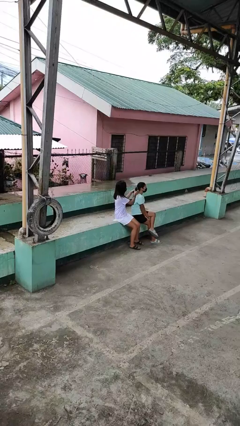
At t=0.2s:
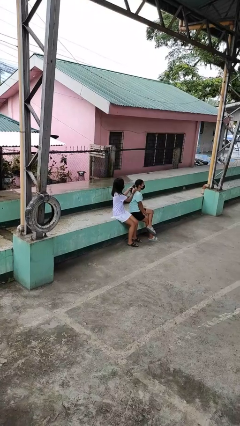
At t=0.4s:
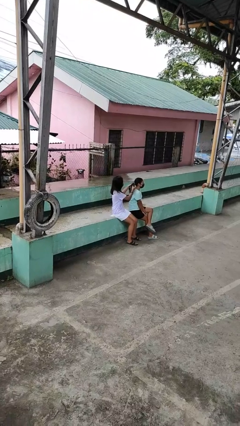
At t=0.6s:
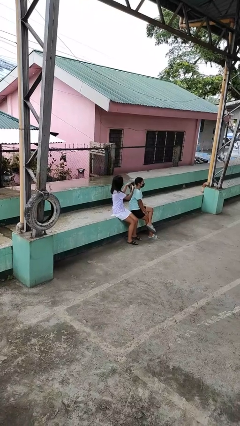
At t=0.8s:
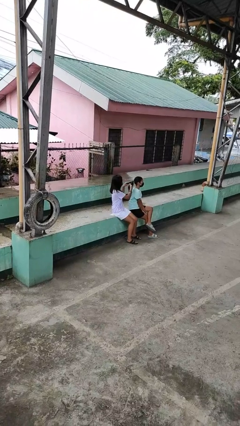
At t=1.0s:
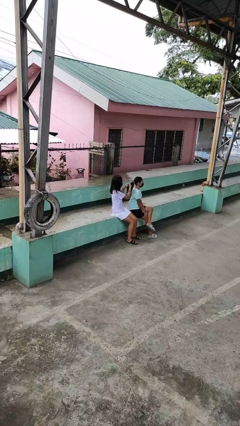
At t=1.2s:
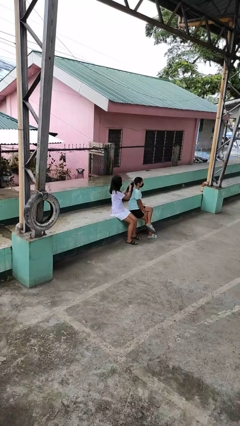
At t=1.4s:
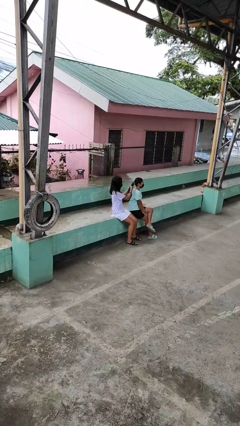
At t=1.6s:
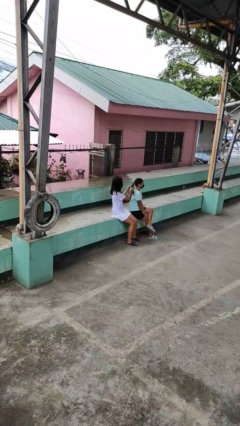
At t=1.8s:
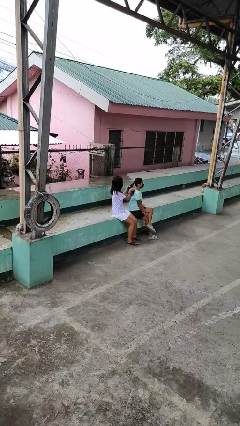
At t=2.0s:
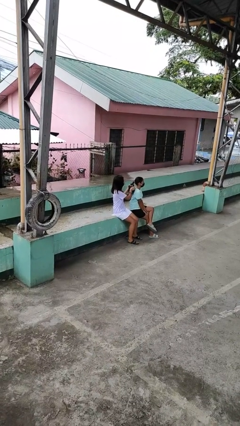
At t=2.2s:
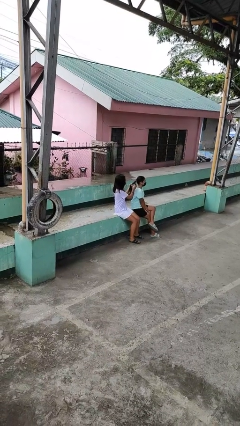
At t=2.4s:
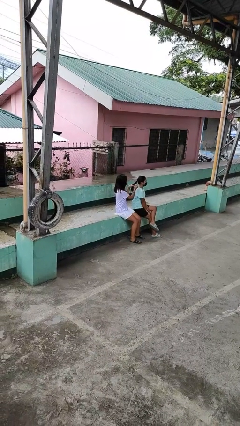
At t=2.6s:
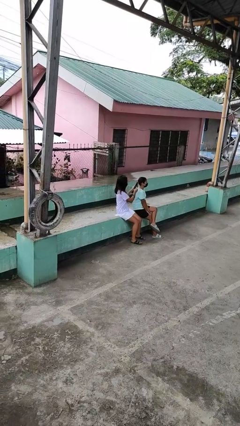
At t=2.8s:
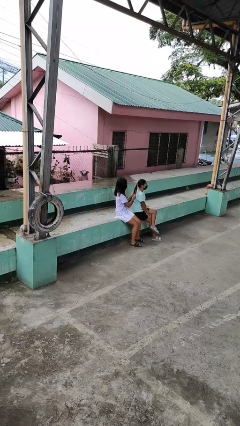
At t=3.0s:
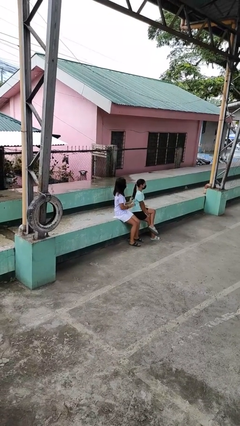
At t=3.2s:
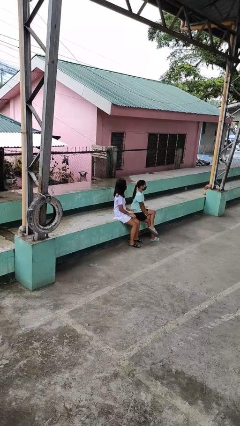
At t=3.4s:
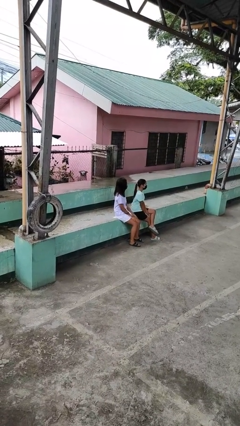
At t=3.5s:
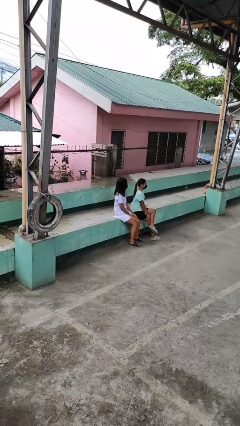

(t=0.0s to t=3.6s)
person braids hair of person

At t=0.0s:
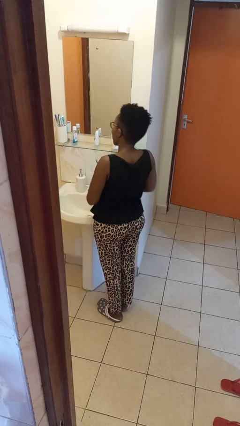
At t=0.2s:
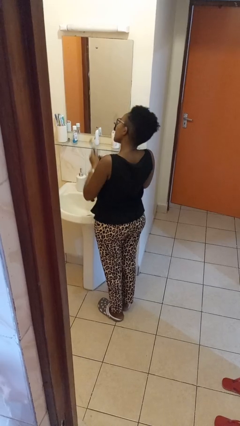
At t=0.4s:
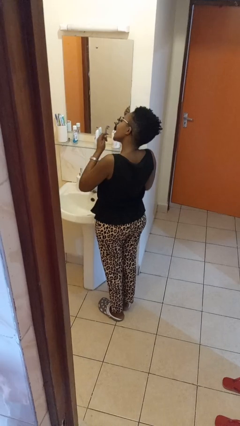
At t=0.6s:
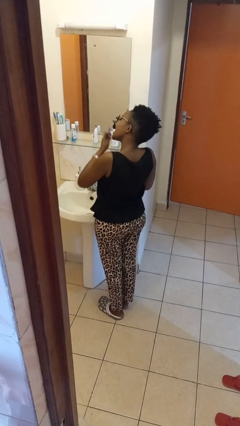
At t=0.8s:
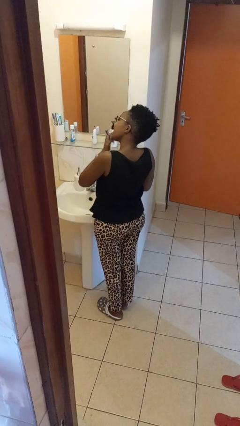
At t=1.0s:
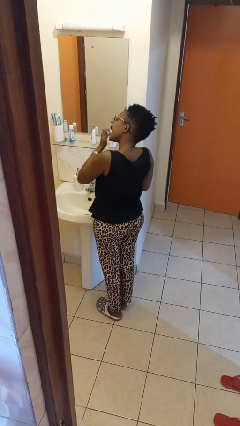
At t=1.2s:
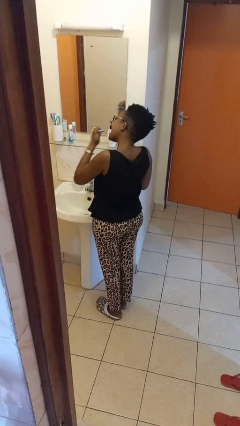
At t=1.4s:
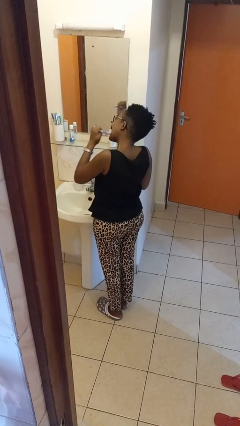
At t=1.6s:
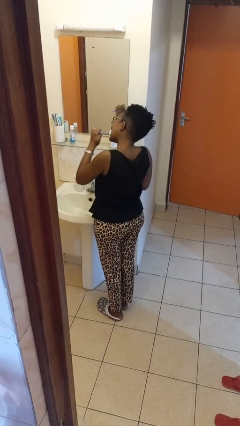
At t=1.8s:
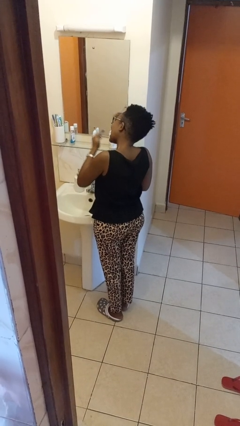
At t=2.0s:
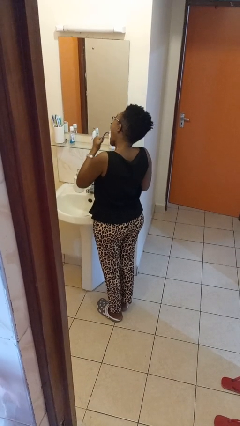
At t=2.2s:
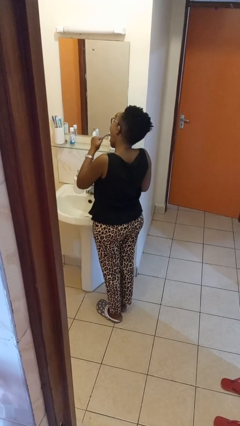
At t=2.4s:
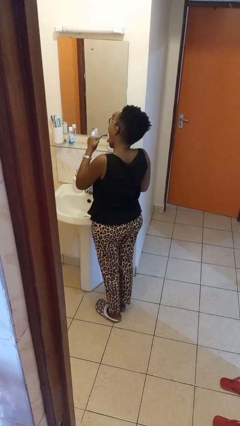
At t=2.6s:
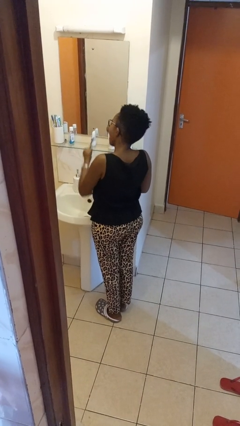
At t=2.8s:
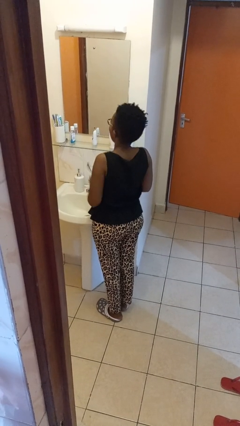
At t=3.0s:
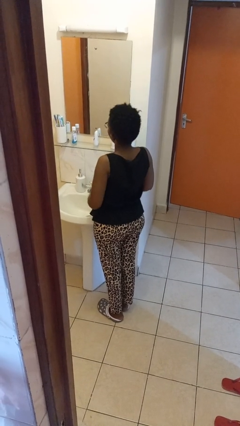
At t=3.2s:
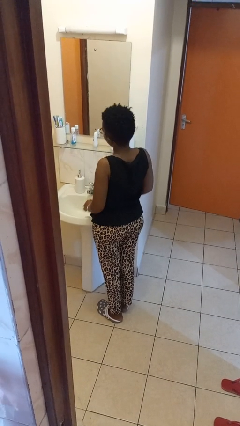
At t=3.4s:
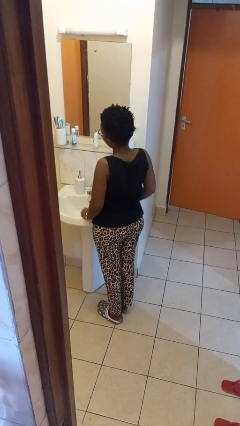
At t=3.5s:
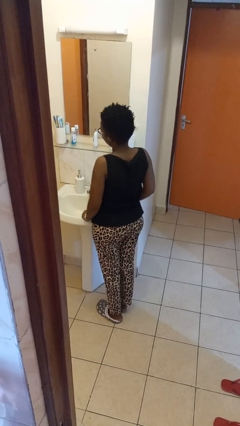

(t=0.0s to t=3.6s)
person brushes teeth

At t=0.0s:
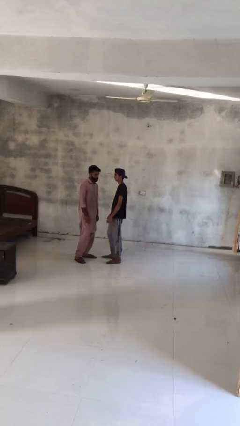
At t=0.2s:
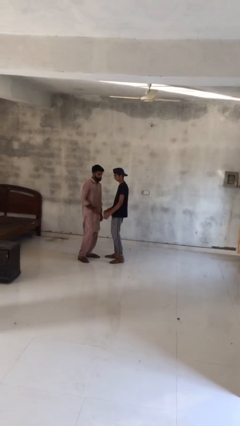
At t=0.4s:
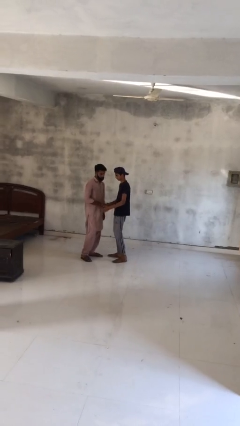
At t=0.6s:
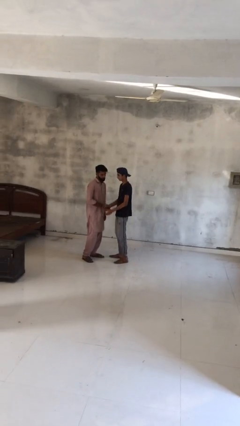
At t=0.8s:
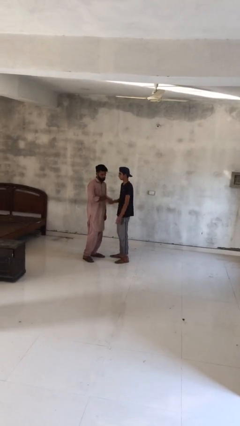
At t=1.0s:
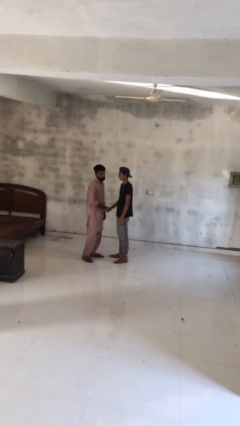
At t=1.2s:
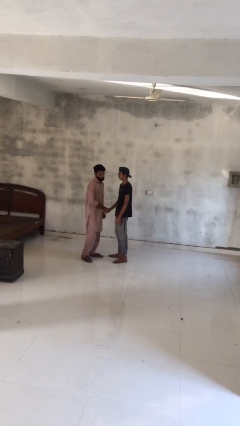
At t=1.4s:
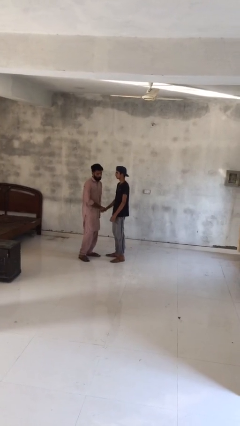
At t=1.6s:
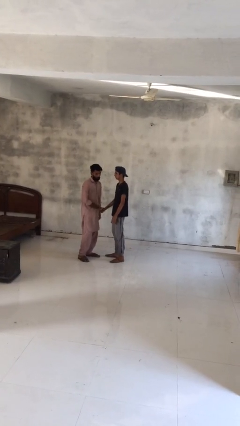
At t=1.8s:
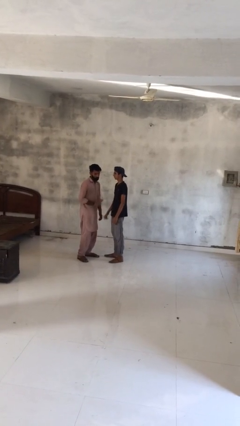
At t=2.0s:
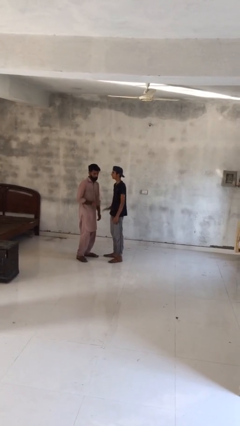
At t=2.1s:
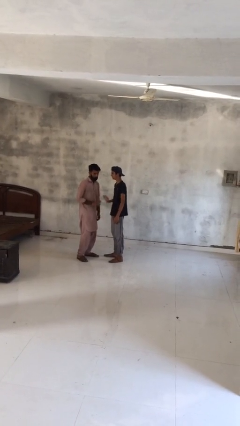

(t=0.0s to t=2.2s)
person shakes hand

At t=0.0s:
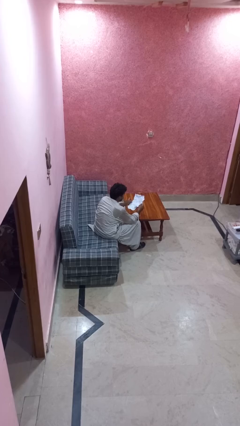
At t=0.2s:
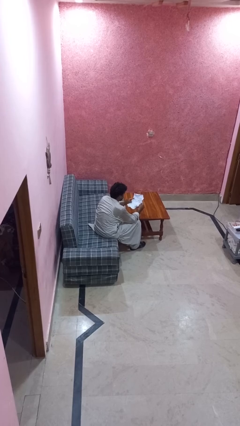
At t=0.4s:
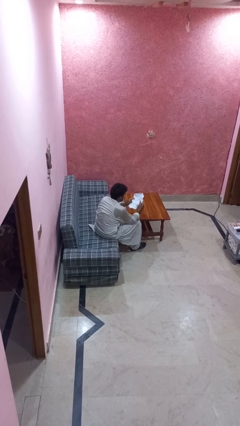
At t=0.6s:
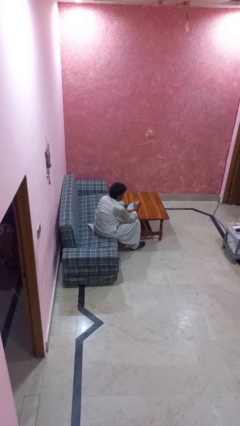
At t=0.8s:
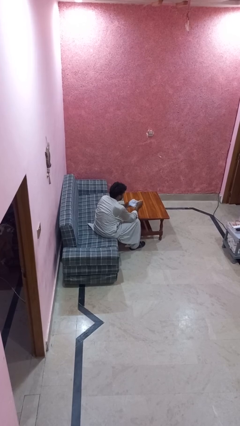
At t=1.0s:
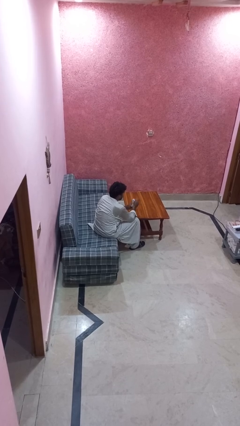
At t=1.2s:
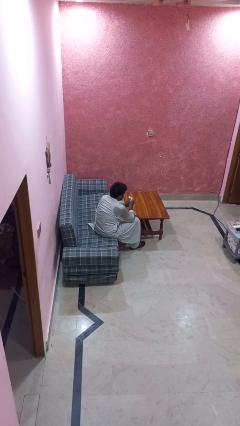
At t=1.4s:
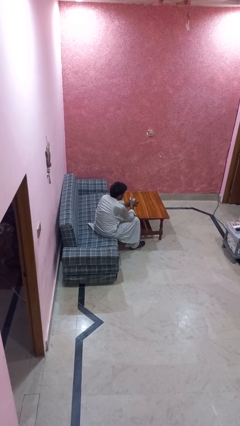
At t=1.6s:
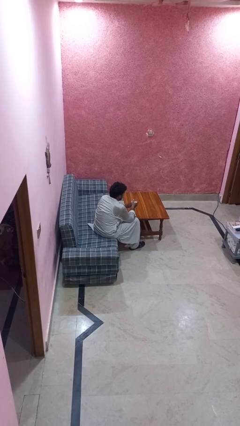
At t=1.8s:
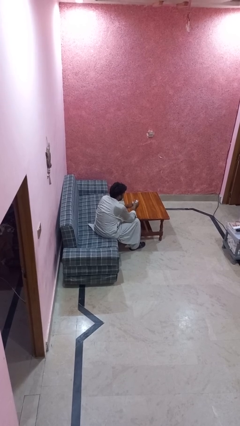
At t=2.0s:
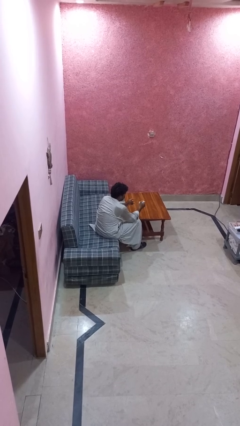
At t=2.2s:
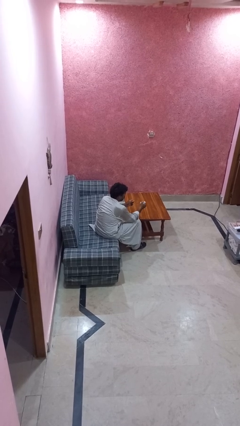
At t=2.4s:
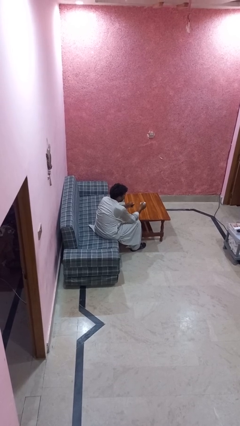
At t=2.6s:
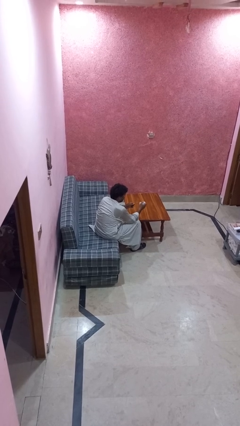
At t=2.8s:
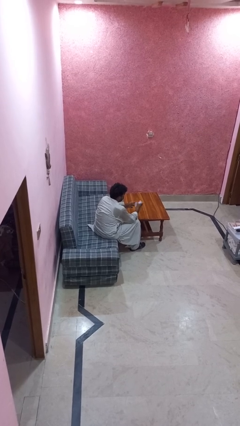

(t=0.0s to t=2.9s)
person crumples paper

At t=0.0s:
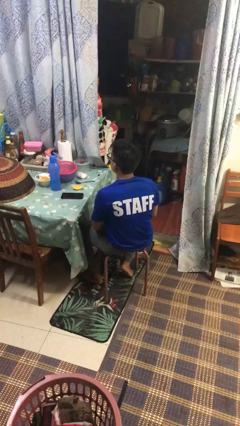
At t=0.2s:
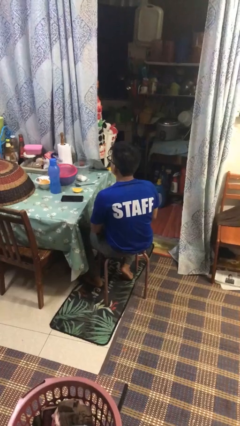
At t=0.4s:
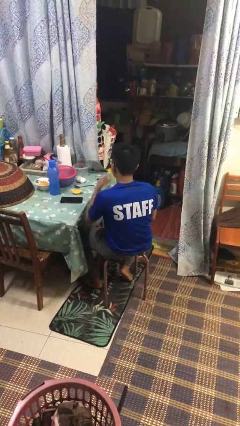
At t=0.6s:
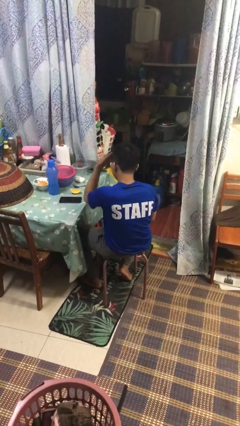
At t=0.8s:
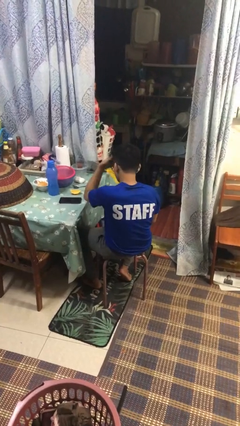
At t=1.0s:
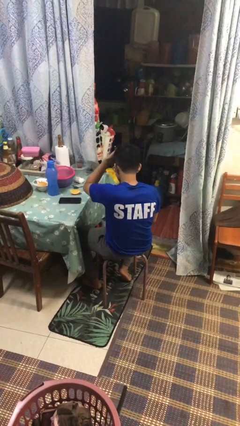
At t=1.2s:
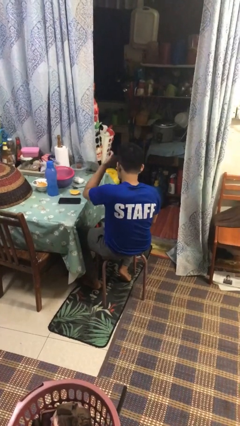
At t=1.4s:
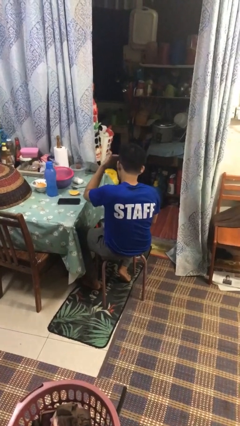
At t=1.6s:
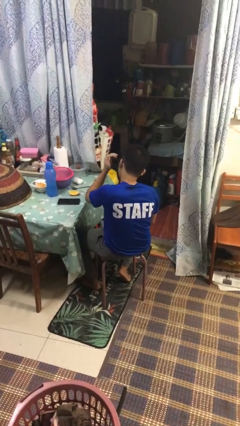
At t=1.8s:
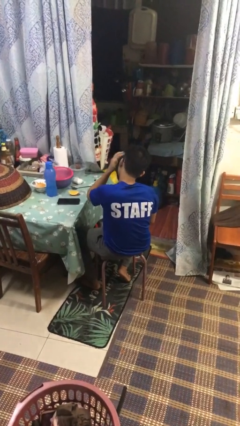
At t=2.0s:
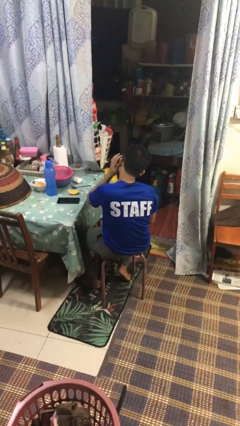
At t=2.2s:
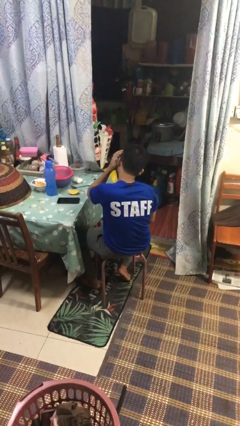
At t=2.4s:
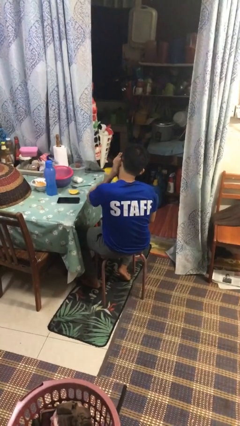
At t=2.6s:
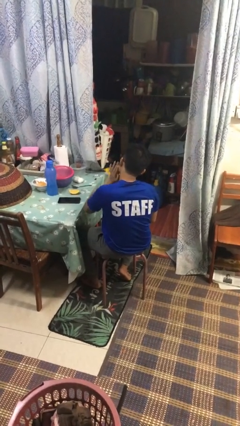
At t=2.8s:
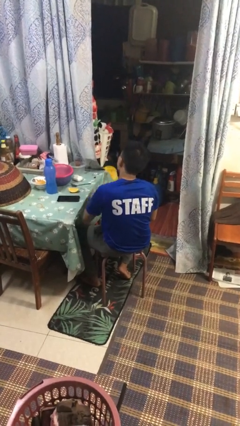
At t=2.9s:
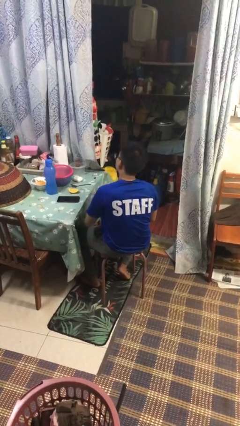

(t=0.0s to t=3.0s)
person scratches face

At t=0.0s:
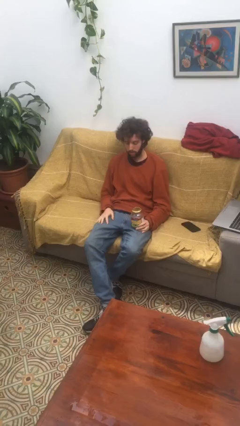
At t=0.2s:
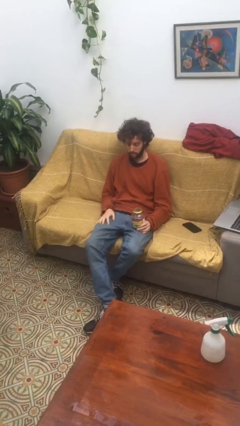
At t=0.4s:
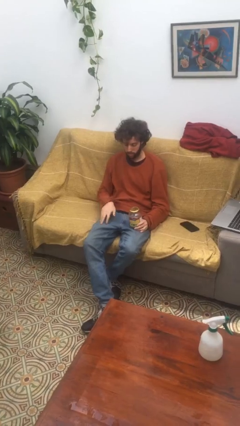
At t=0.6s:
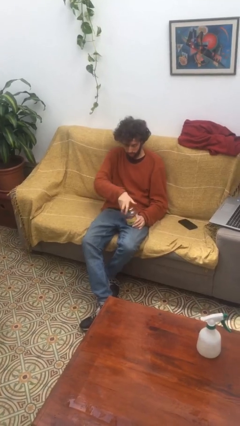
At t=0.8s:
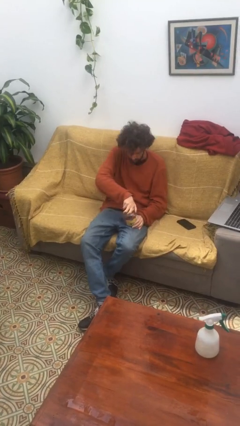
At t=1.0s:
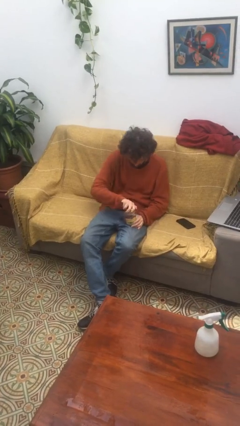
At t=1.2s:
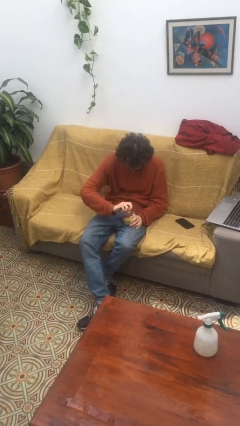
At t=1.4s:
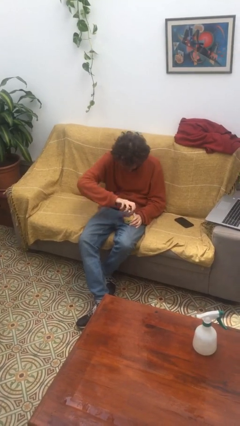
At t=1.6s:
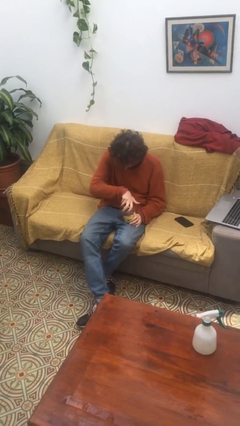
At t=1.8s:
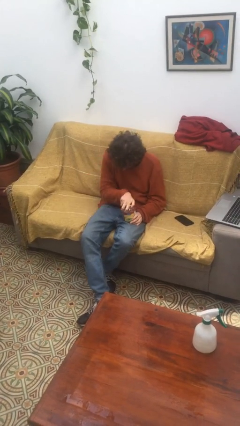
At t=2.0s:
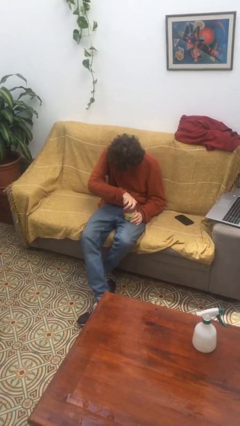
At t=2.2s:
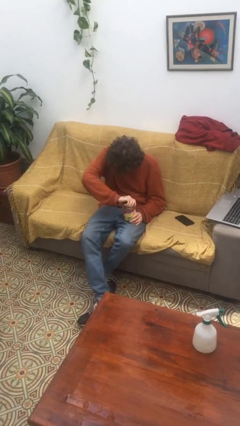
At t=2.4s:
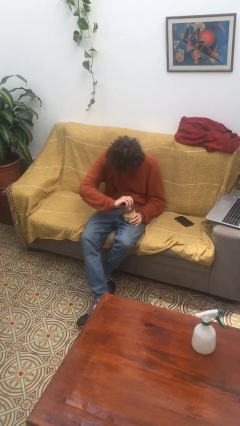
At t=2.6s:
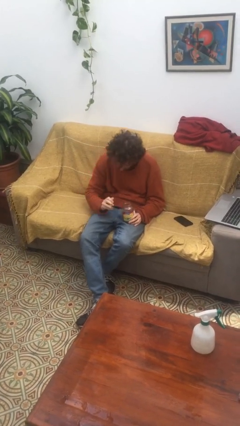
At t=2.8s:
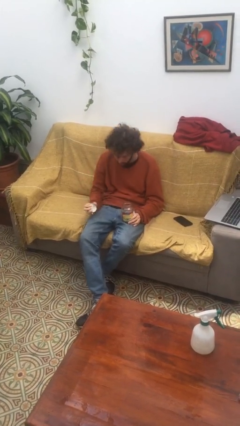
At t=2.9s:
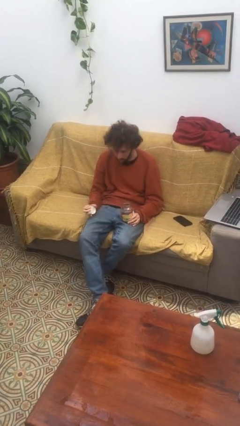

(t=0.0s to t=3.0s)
person opens jar
